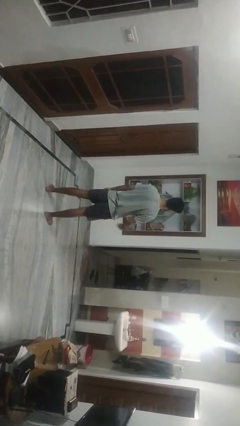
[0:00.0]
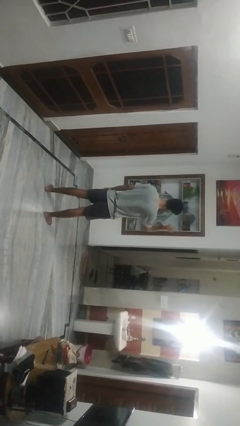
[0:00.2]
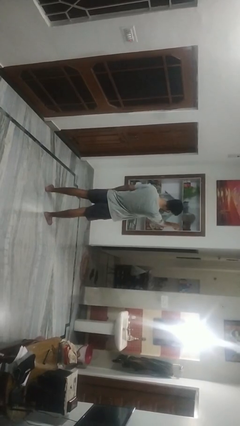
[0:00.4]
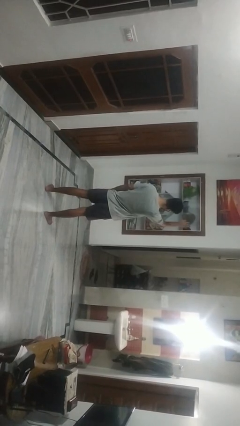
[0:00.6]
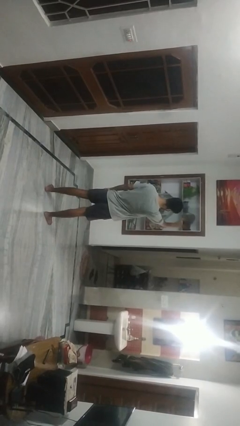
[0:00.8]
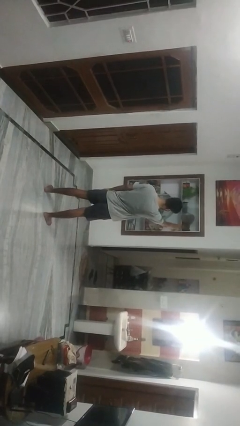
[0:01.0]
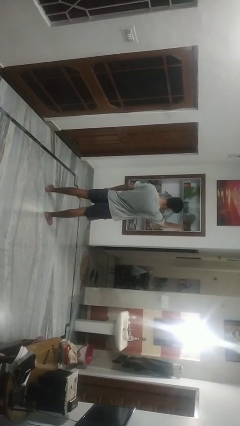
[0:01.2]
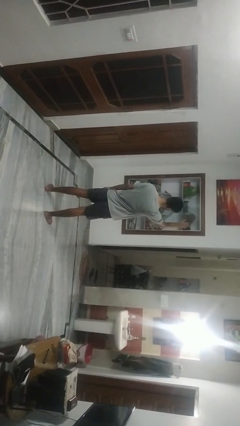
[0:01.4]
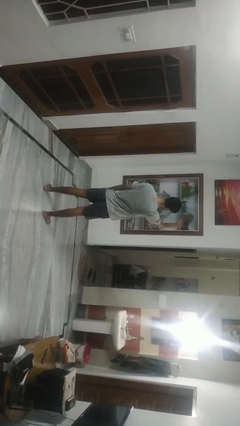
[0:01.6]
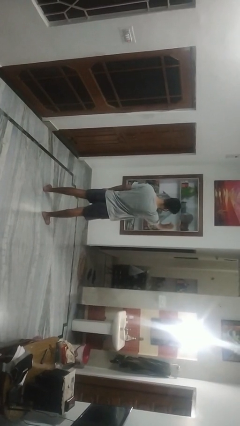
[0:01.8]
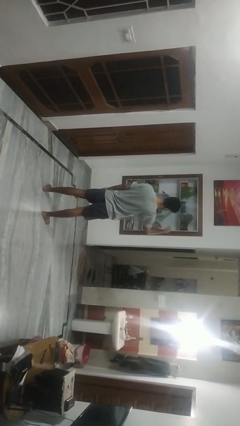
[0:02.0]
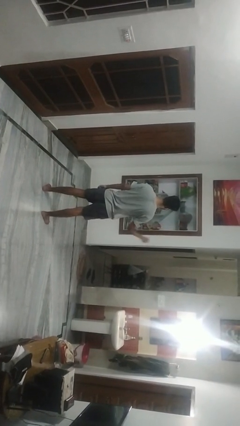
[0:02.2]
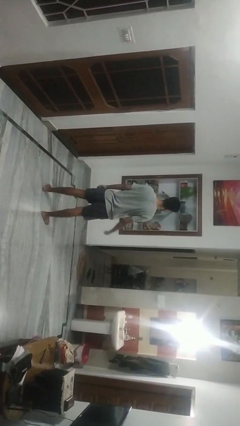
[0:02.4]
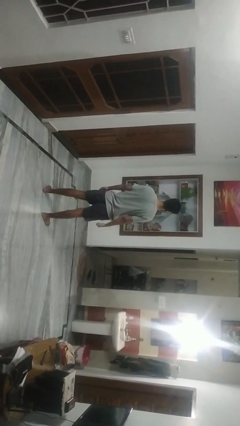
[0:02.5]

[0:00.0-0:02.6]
person gestures come here

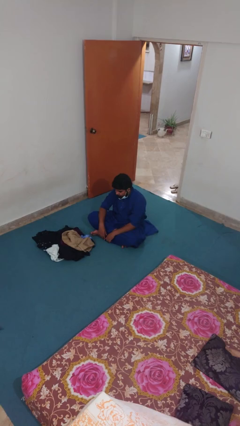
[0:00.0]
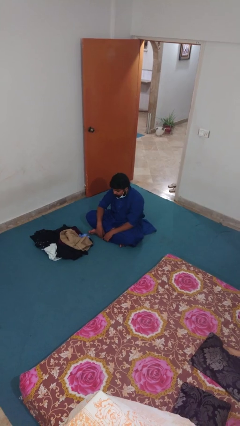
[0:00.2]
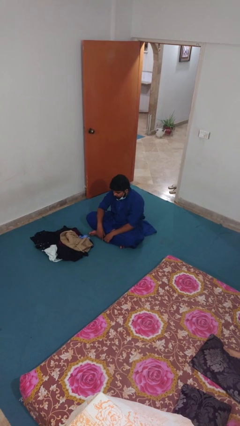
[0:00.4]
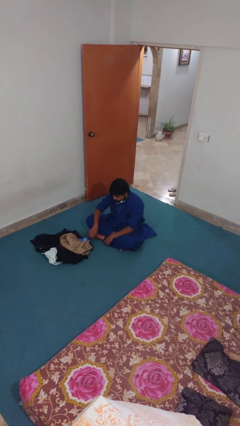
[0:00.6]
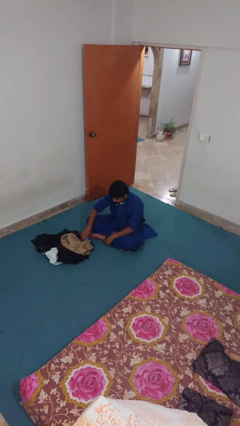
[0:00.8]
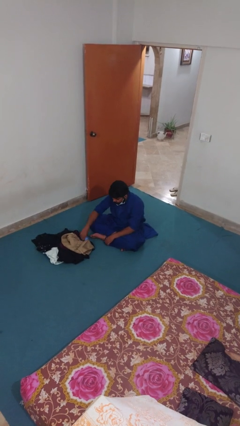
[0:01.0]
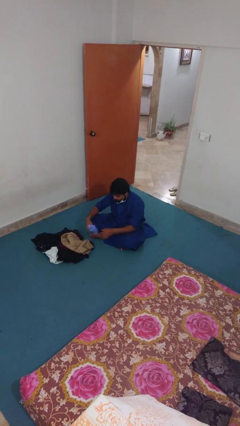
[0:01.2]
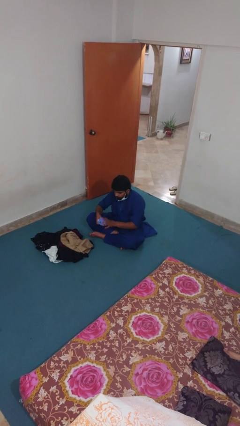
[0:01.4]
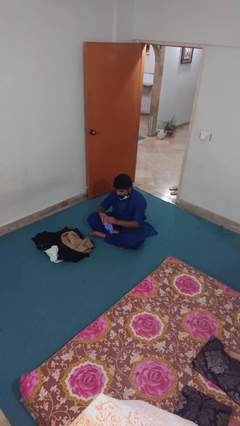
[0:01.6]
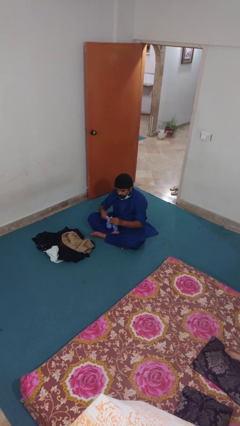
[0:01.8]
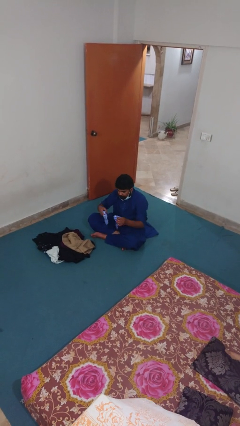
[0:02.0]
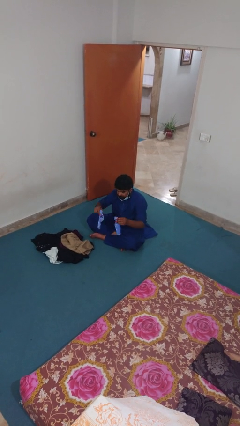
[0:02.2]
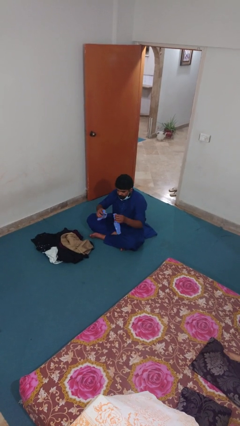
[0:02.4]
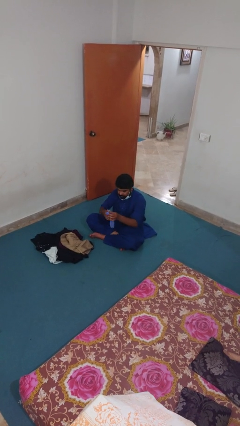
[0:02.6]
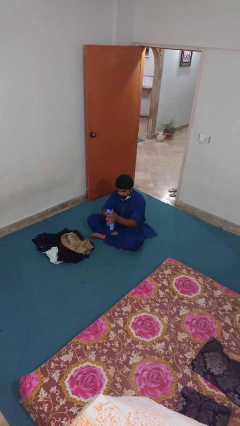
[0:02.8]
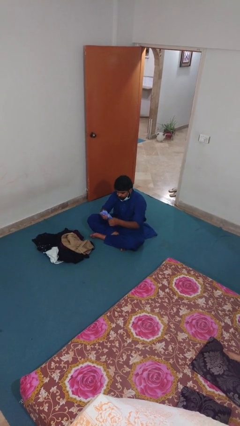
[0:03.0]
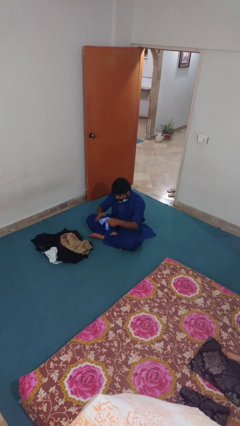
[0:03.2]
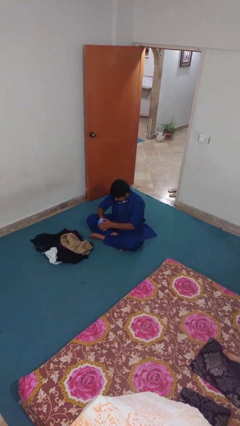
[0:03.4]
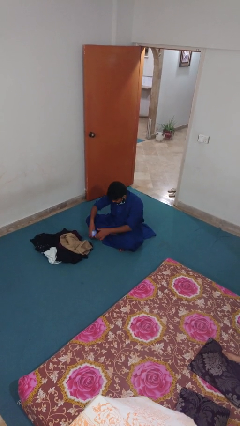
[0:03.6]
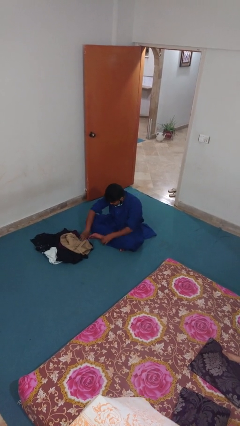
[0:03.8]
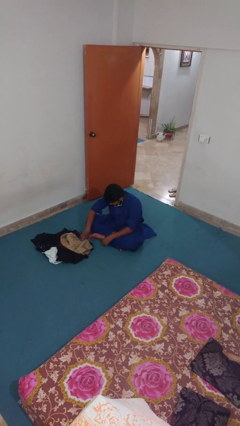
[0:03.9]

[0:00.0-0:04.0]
person folds socks

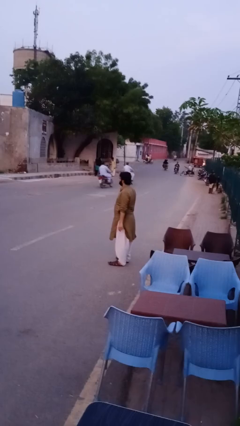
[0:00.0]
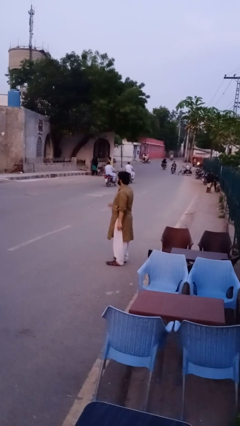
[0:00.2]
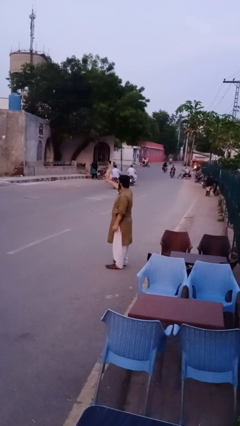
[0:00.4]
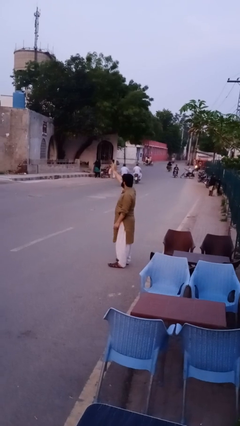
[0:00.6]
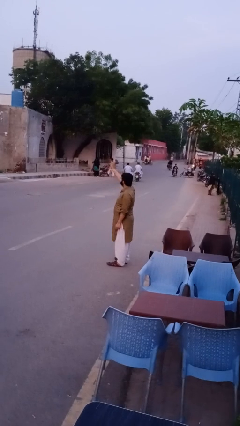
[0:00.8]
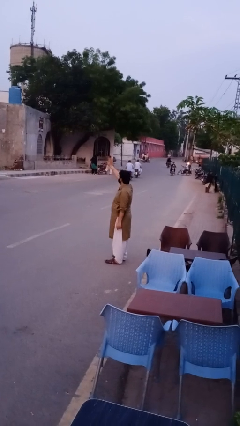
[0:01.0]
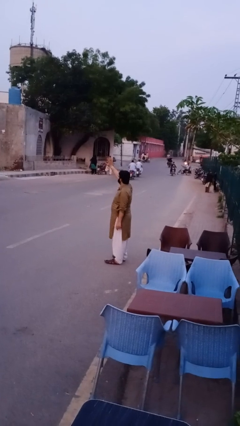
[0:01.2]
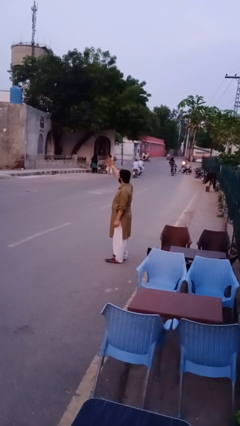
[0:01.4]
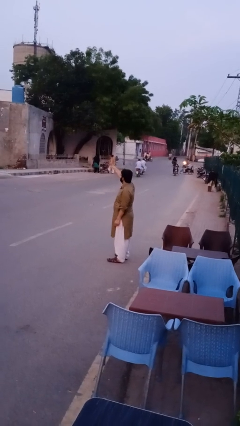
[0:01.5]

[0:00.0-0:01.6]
person waves at person

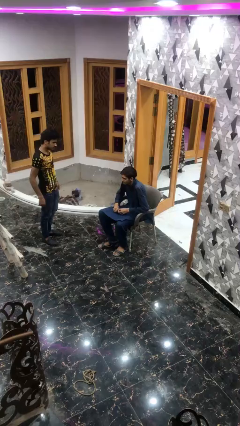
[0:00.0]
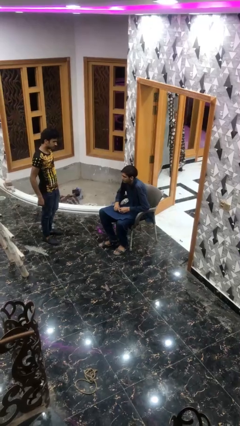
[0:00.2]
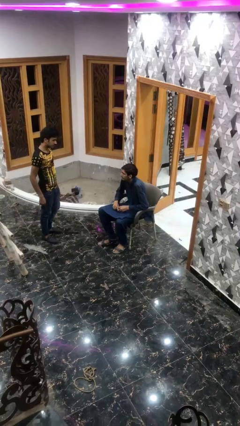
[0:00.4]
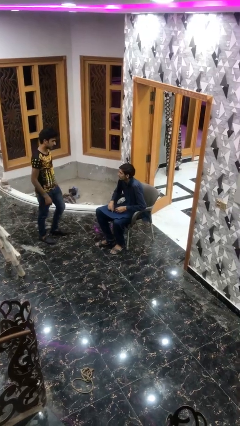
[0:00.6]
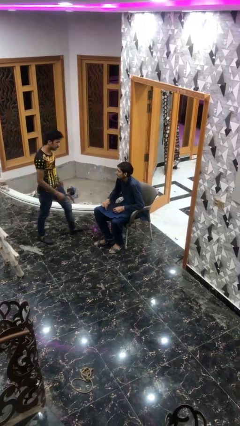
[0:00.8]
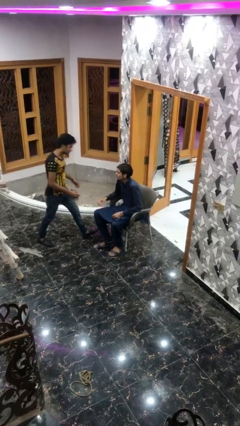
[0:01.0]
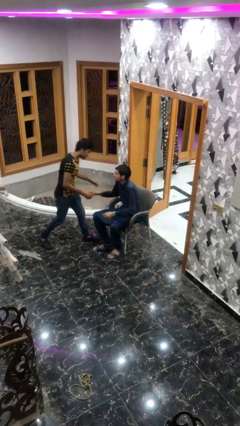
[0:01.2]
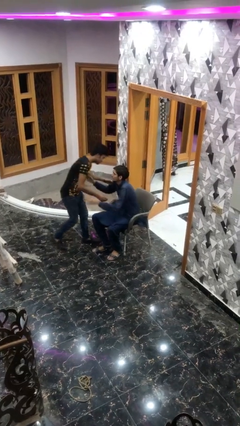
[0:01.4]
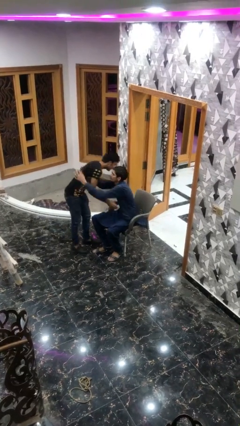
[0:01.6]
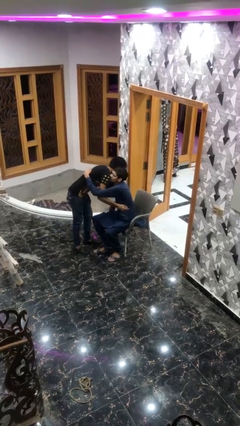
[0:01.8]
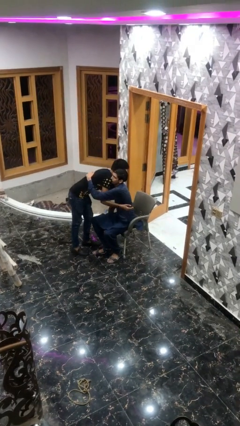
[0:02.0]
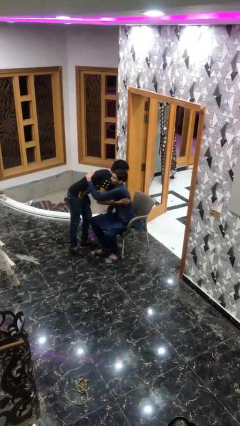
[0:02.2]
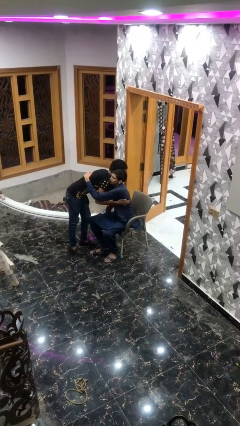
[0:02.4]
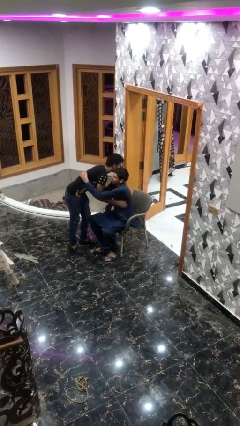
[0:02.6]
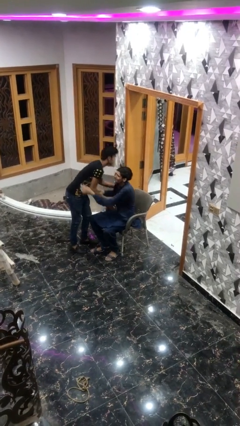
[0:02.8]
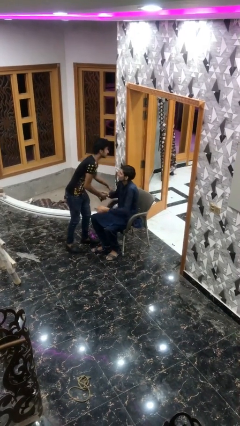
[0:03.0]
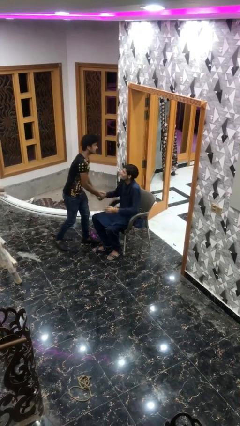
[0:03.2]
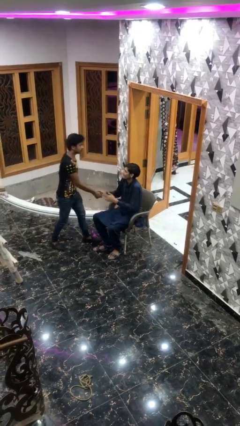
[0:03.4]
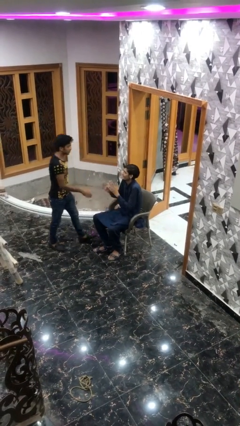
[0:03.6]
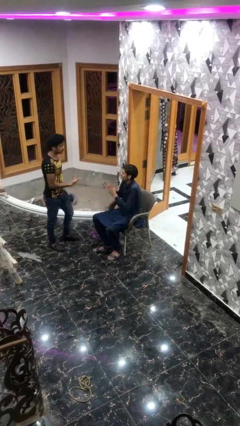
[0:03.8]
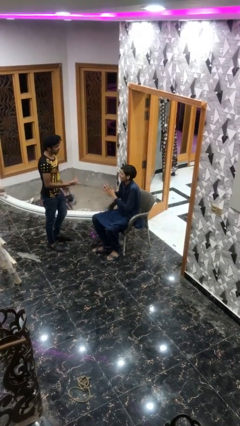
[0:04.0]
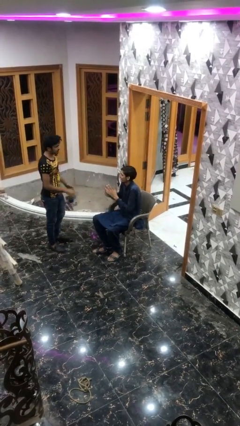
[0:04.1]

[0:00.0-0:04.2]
person embraces person

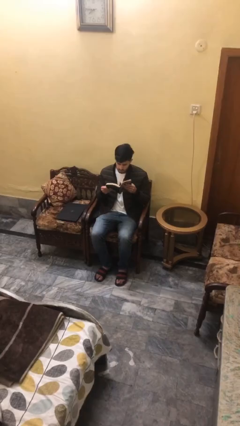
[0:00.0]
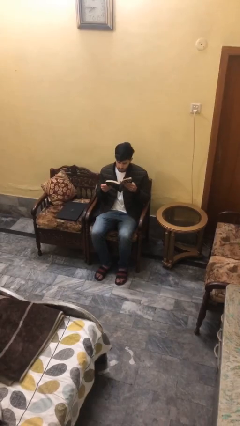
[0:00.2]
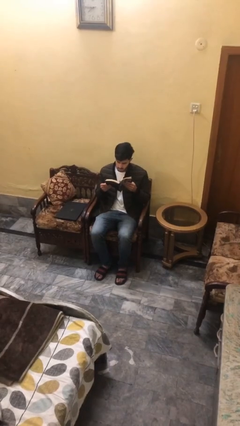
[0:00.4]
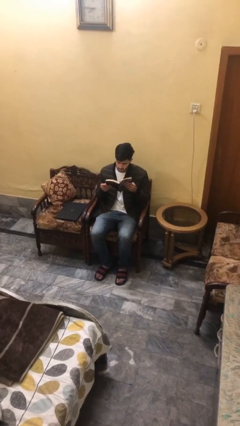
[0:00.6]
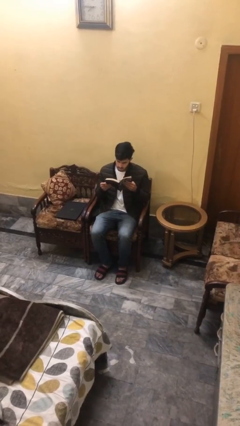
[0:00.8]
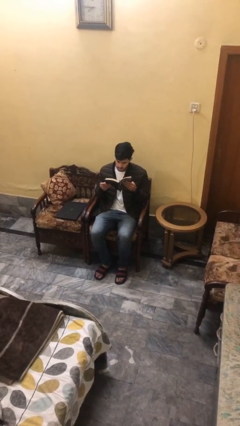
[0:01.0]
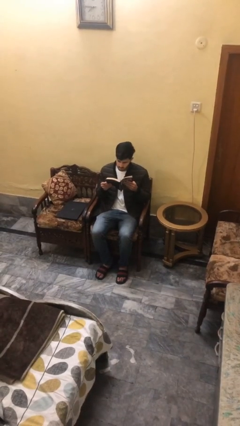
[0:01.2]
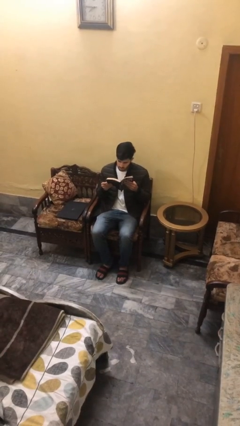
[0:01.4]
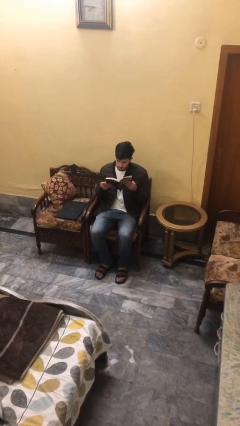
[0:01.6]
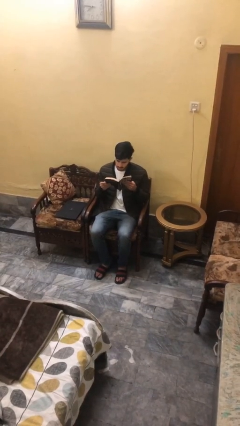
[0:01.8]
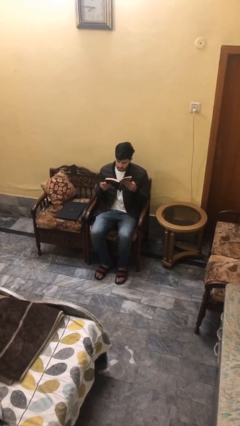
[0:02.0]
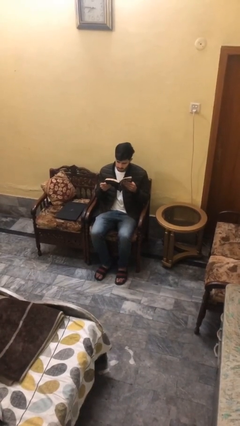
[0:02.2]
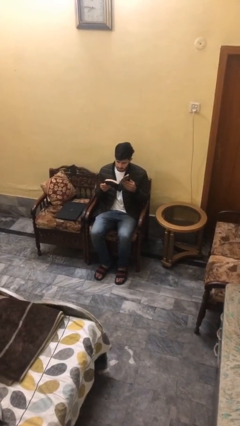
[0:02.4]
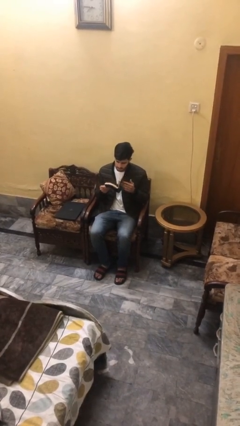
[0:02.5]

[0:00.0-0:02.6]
person reads document

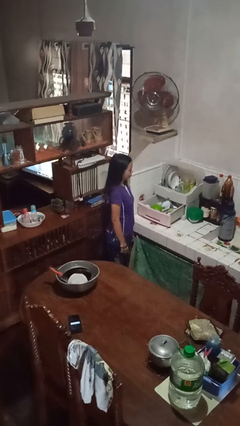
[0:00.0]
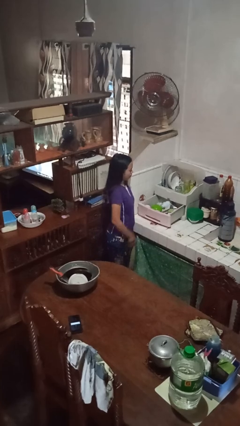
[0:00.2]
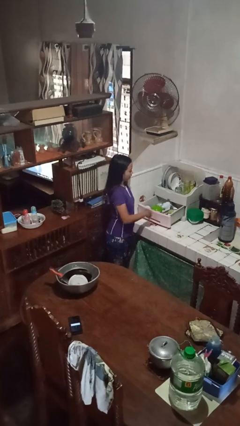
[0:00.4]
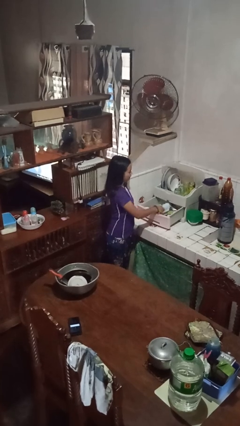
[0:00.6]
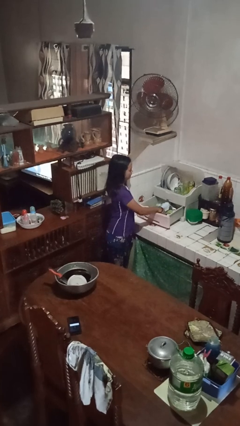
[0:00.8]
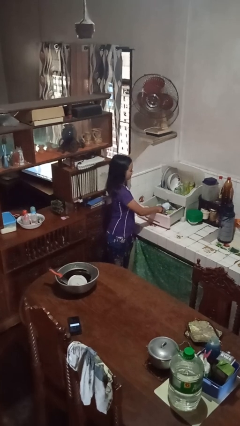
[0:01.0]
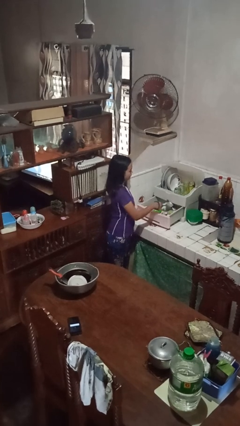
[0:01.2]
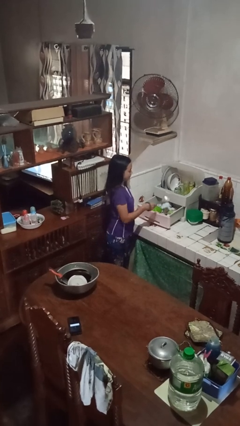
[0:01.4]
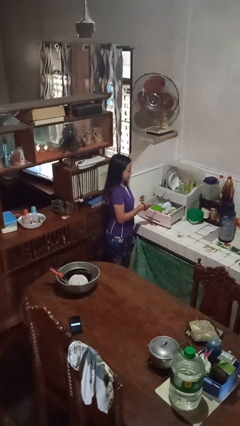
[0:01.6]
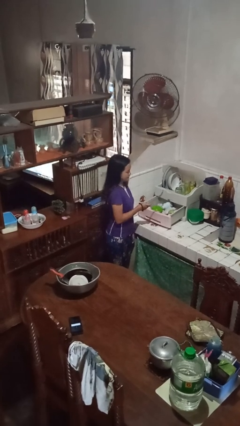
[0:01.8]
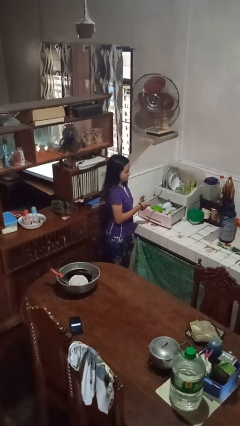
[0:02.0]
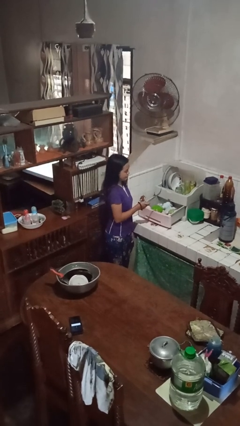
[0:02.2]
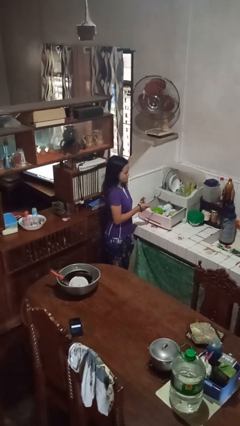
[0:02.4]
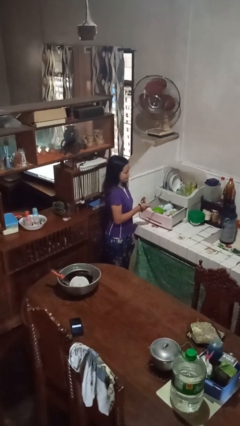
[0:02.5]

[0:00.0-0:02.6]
person takes object from kitchen drawer
